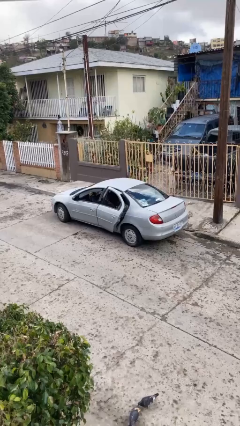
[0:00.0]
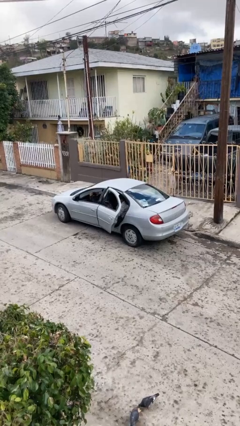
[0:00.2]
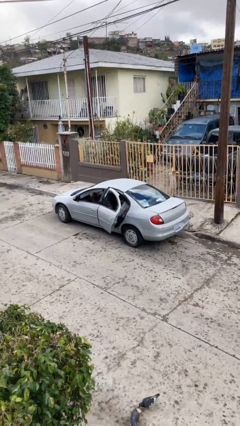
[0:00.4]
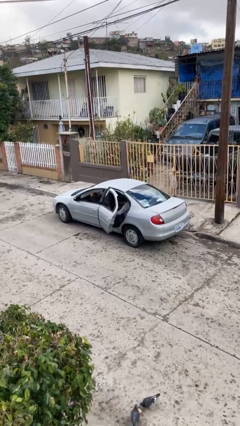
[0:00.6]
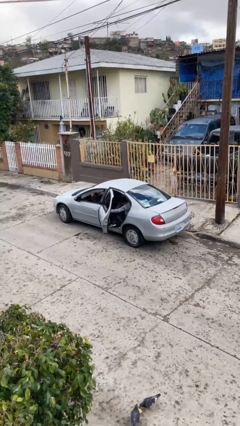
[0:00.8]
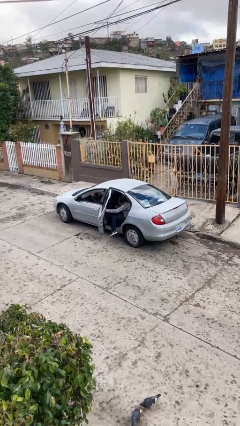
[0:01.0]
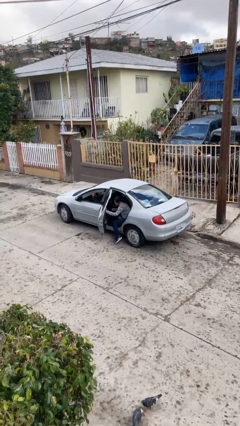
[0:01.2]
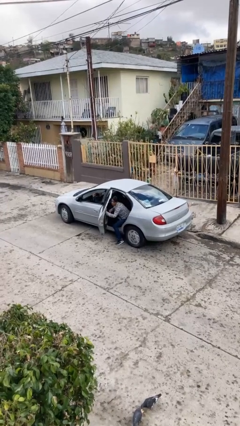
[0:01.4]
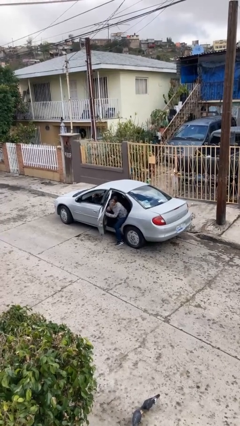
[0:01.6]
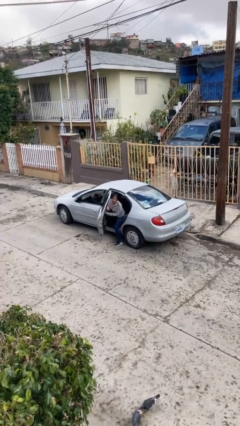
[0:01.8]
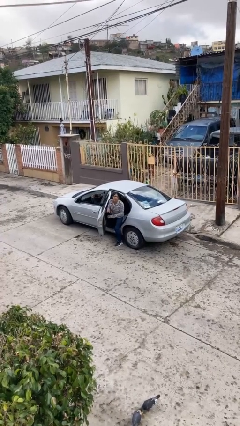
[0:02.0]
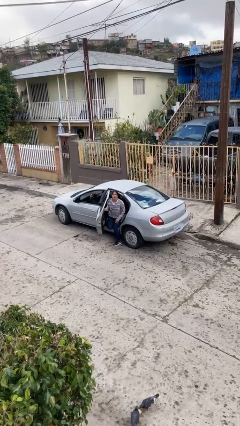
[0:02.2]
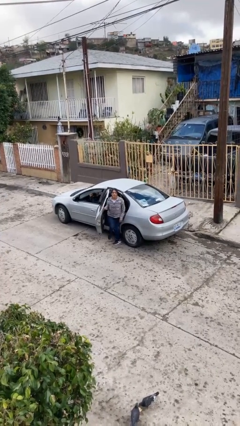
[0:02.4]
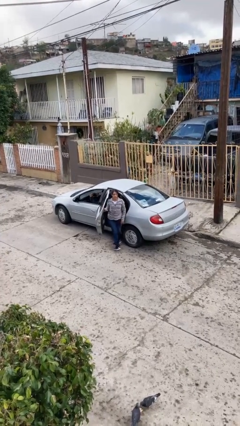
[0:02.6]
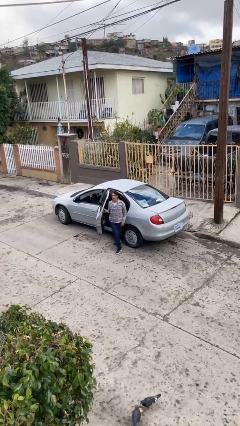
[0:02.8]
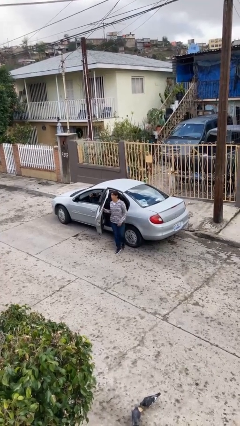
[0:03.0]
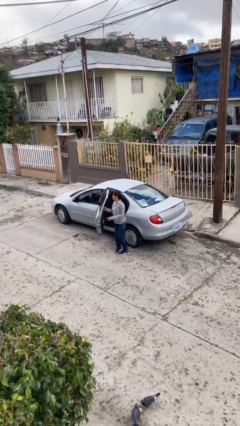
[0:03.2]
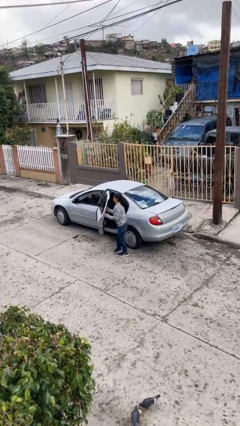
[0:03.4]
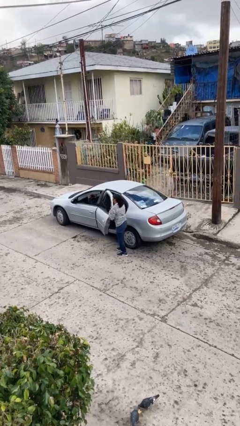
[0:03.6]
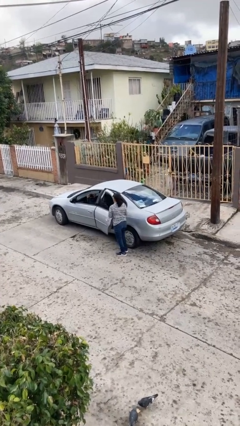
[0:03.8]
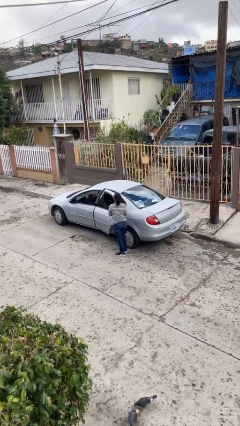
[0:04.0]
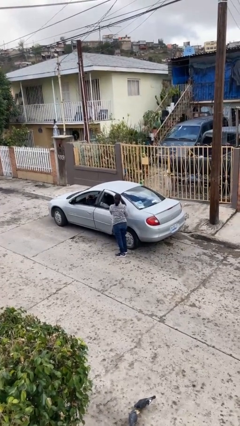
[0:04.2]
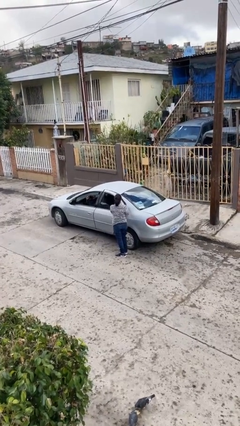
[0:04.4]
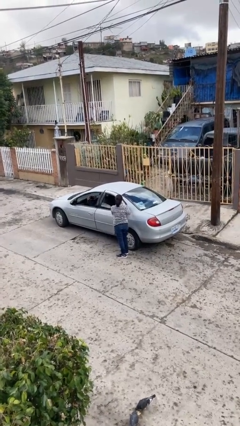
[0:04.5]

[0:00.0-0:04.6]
car drops off person

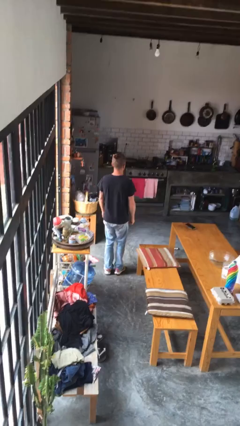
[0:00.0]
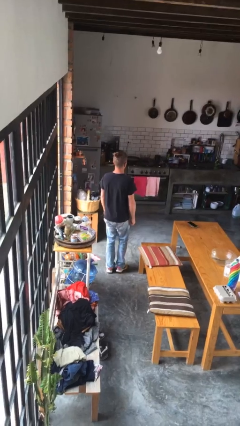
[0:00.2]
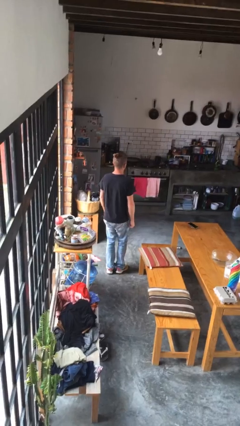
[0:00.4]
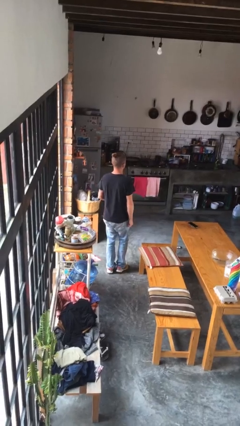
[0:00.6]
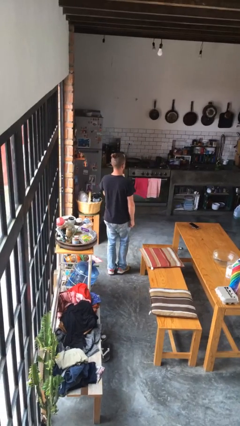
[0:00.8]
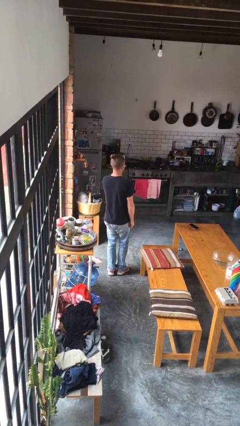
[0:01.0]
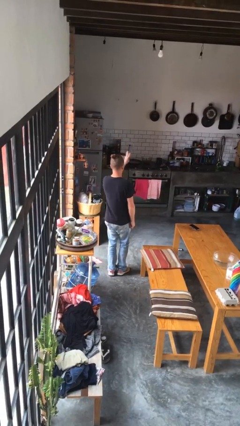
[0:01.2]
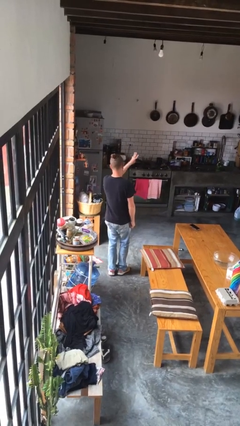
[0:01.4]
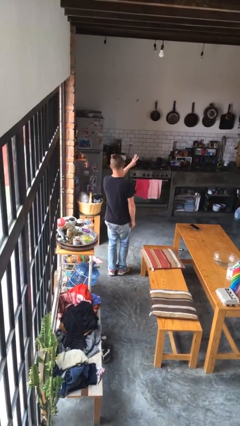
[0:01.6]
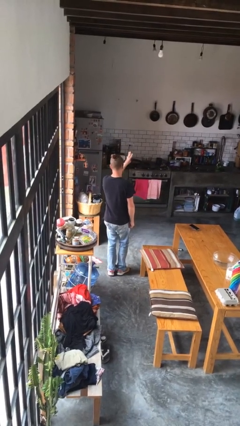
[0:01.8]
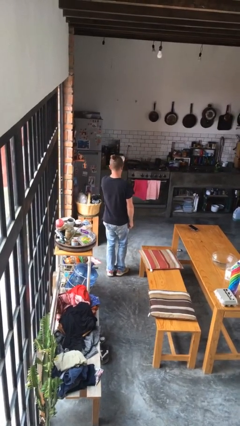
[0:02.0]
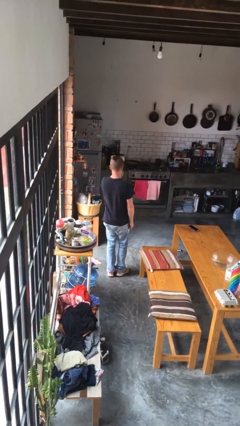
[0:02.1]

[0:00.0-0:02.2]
person gestures number three

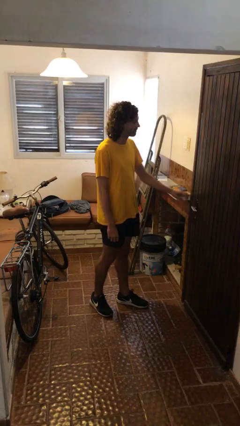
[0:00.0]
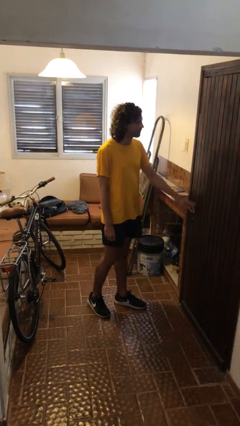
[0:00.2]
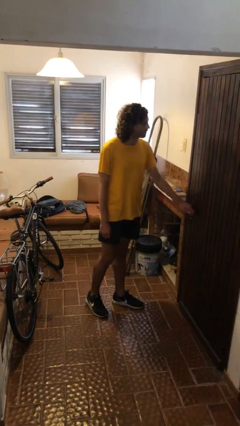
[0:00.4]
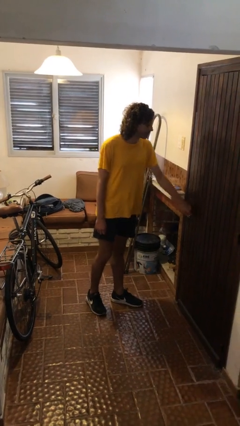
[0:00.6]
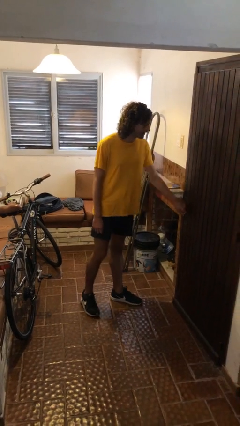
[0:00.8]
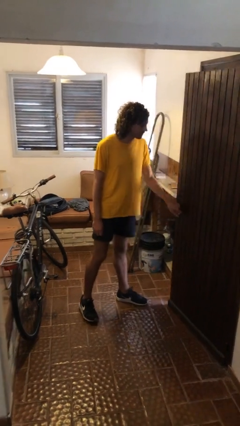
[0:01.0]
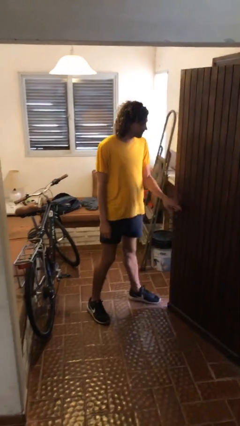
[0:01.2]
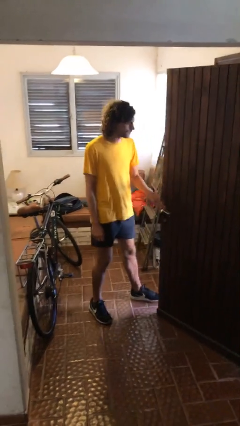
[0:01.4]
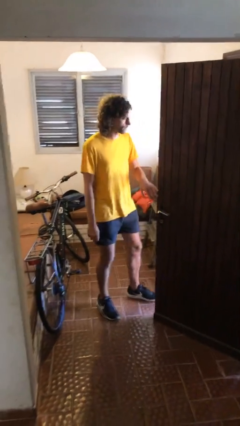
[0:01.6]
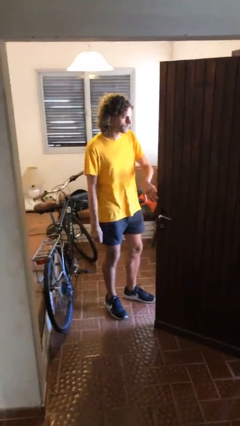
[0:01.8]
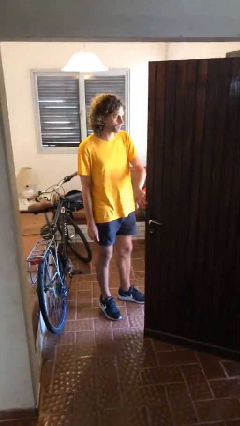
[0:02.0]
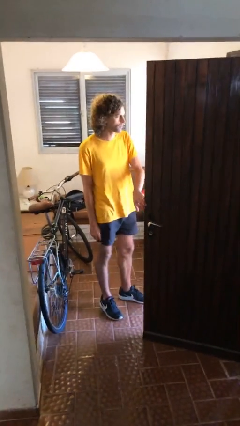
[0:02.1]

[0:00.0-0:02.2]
person opens facility door

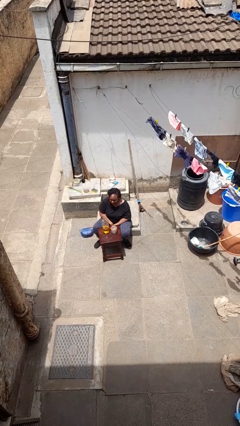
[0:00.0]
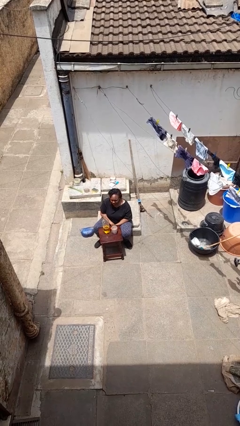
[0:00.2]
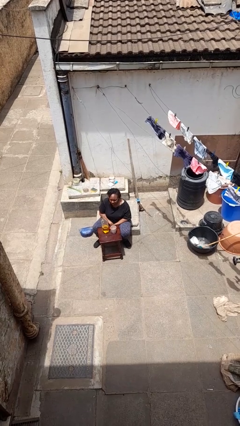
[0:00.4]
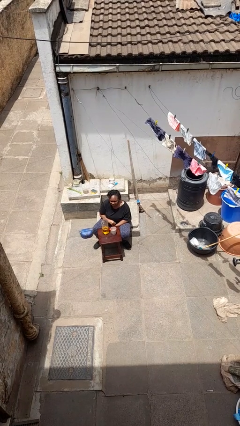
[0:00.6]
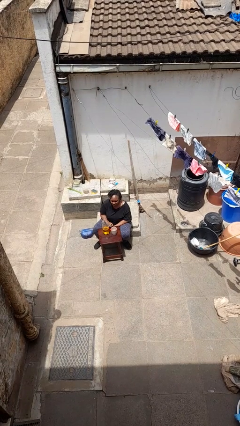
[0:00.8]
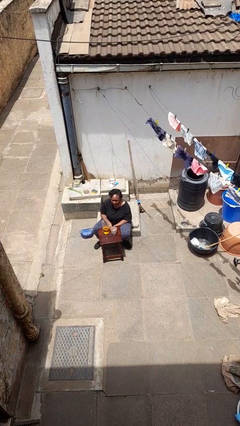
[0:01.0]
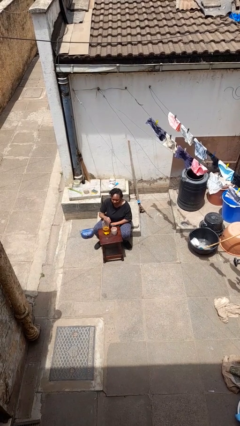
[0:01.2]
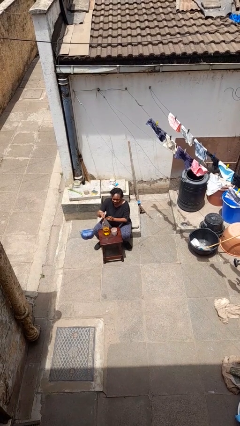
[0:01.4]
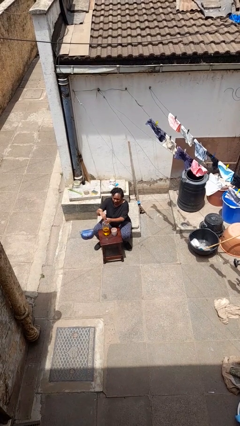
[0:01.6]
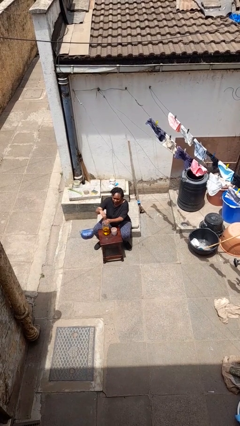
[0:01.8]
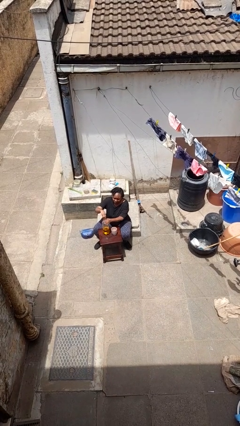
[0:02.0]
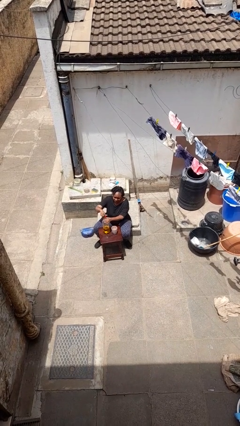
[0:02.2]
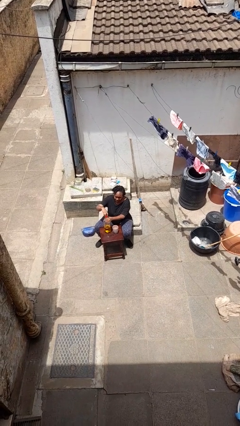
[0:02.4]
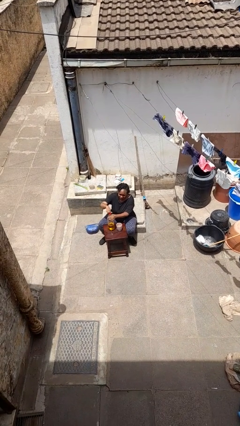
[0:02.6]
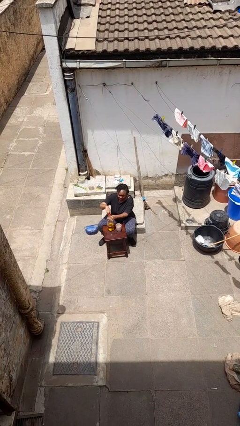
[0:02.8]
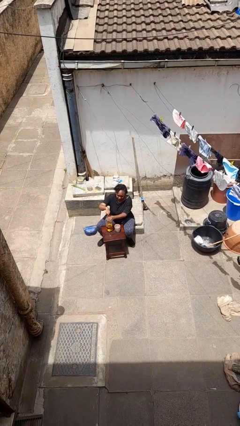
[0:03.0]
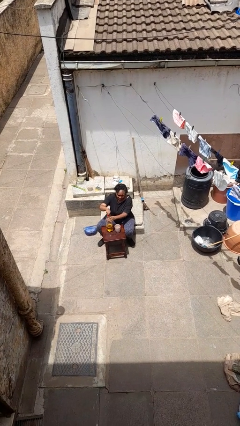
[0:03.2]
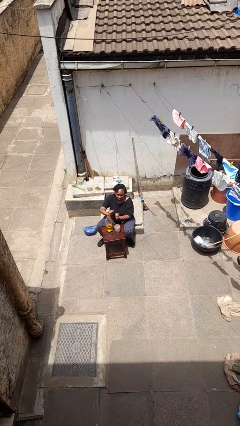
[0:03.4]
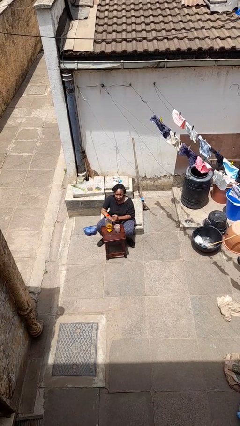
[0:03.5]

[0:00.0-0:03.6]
person screws lid to bottle

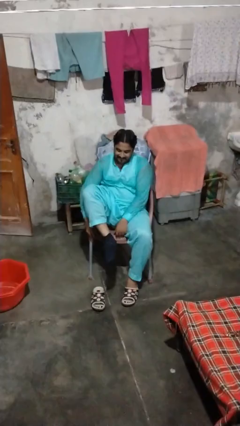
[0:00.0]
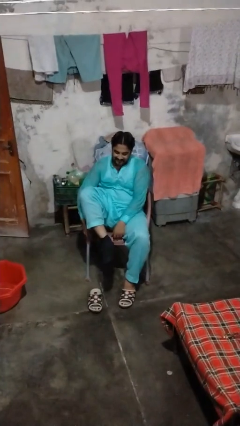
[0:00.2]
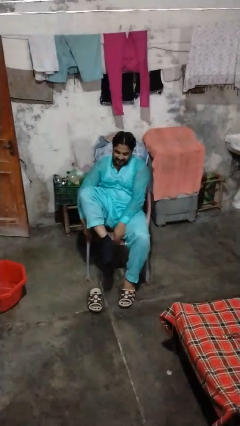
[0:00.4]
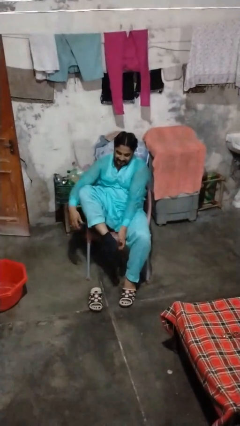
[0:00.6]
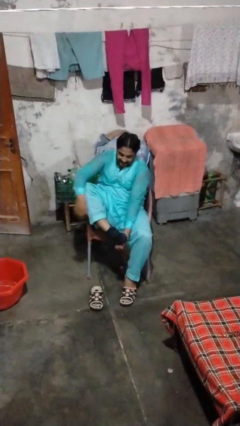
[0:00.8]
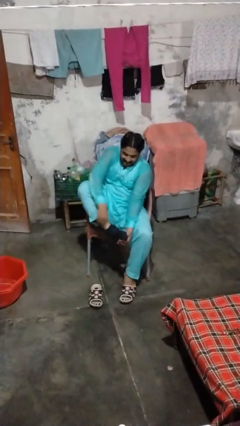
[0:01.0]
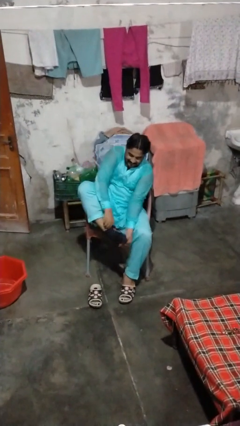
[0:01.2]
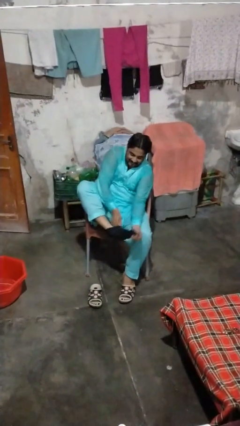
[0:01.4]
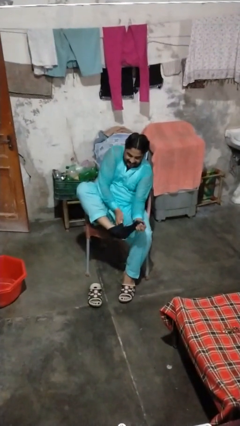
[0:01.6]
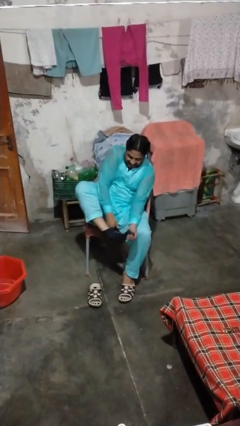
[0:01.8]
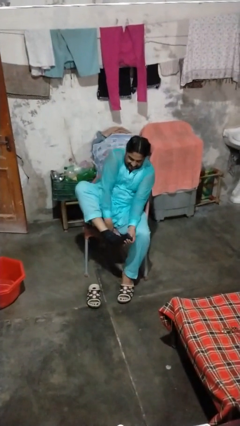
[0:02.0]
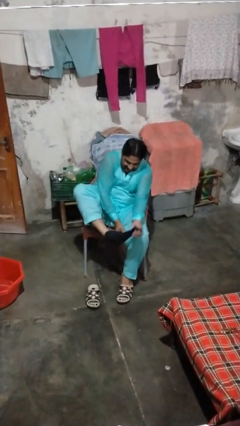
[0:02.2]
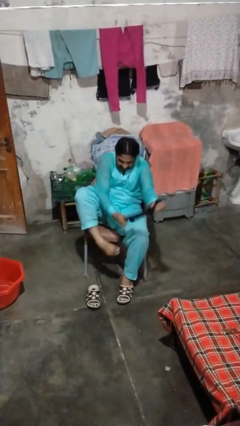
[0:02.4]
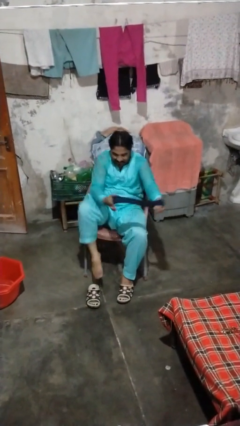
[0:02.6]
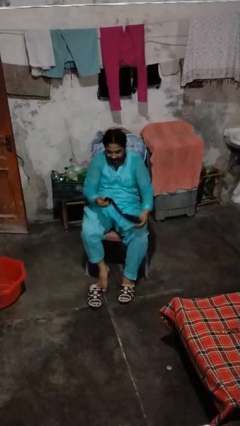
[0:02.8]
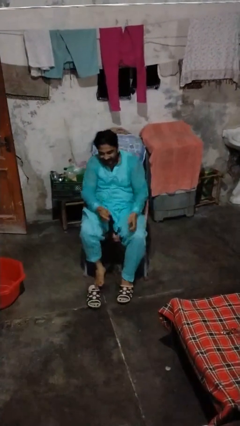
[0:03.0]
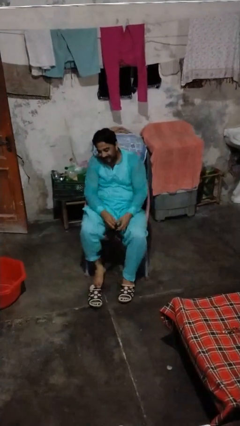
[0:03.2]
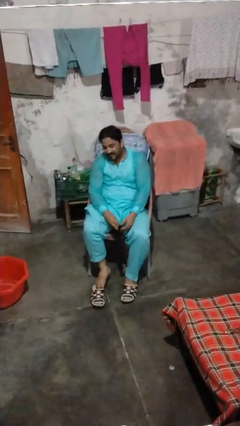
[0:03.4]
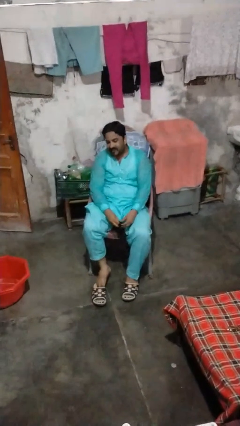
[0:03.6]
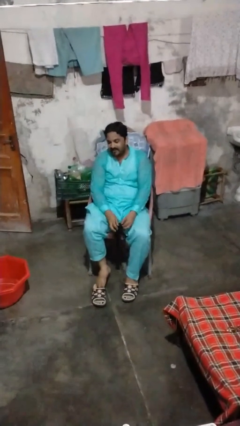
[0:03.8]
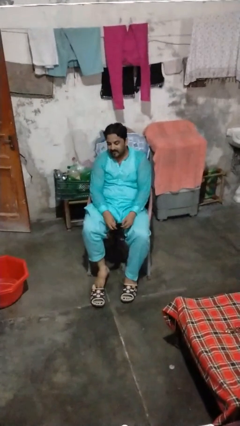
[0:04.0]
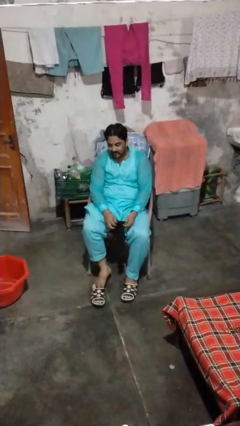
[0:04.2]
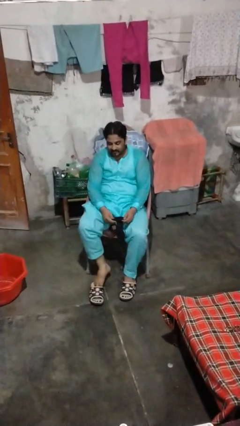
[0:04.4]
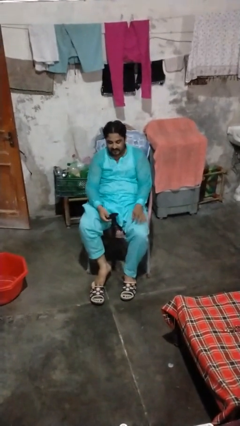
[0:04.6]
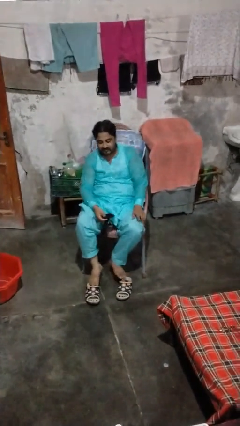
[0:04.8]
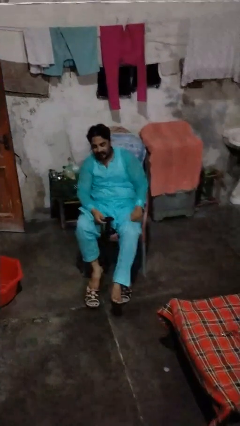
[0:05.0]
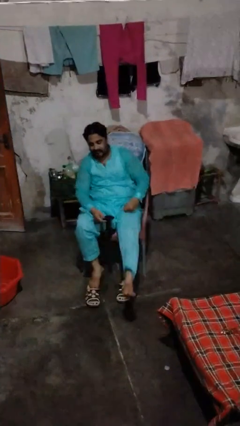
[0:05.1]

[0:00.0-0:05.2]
person takes off socks
